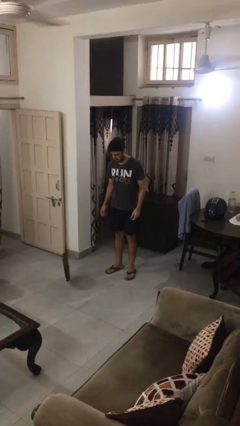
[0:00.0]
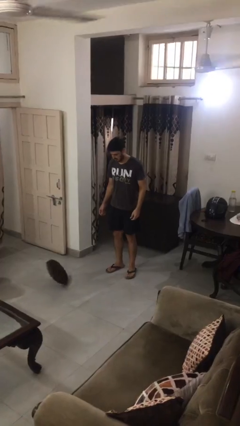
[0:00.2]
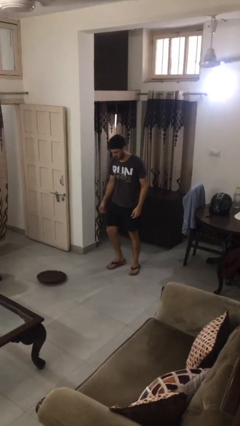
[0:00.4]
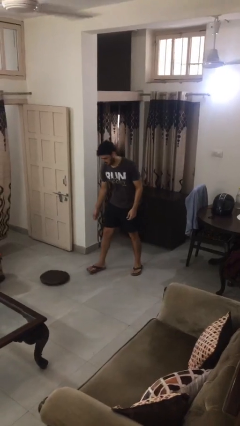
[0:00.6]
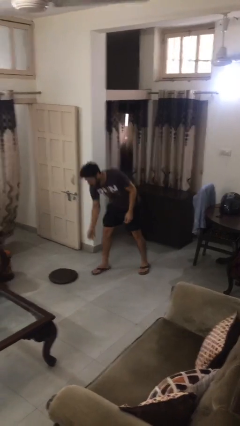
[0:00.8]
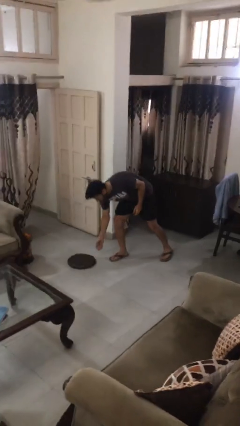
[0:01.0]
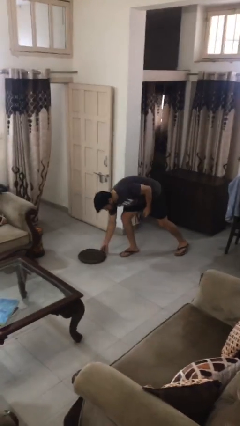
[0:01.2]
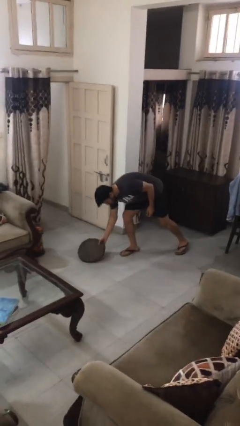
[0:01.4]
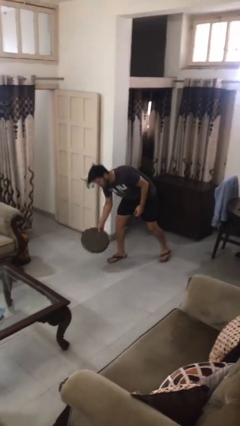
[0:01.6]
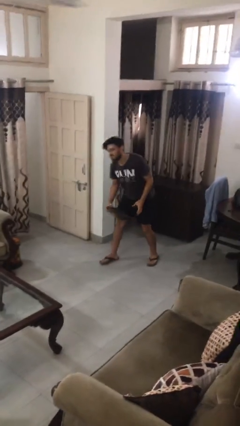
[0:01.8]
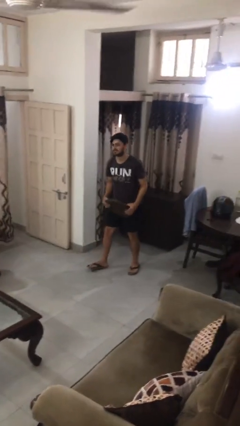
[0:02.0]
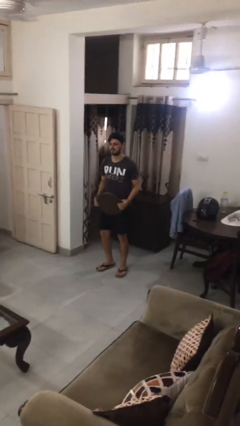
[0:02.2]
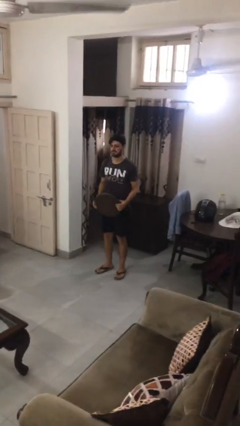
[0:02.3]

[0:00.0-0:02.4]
person picks up object from floor

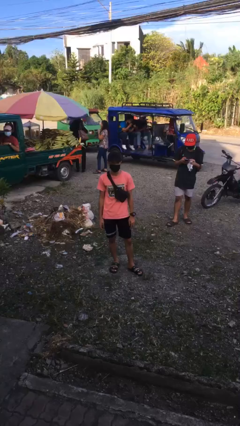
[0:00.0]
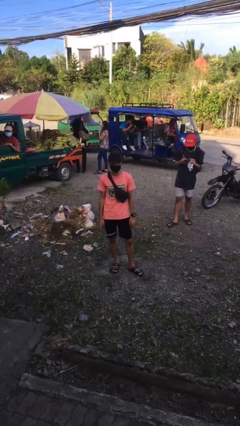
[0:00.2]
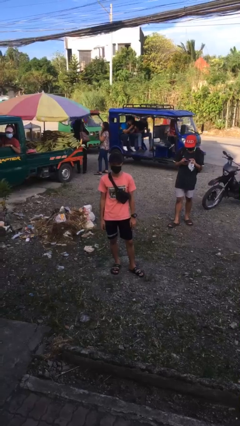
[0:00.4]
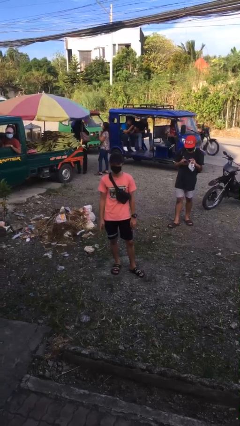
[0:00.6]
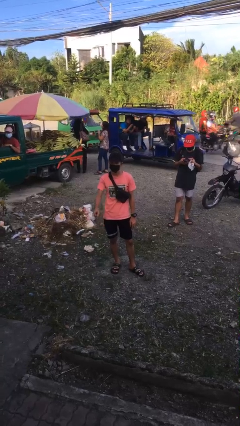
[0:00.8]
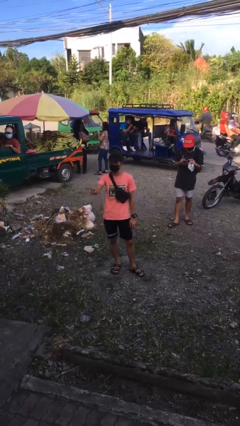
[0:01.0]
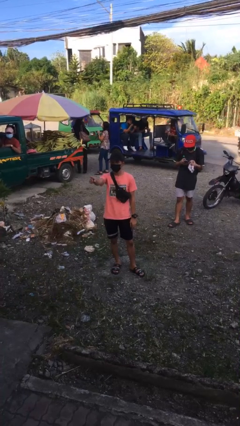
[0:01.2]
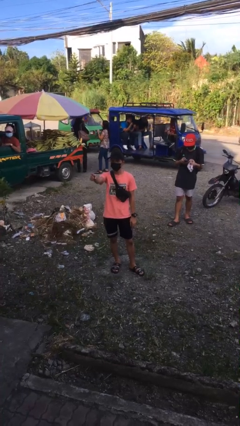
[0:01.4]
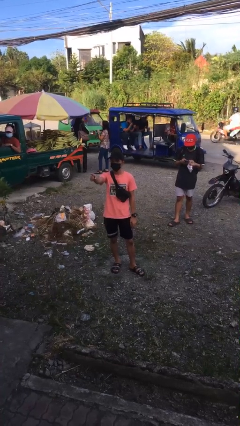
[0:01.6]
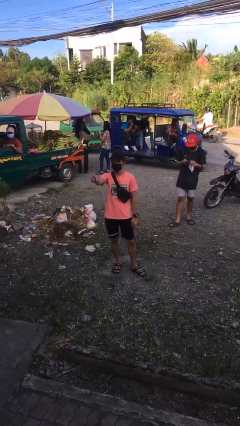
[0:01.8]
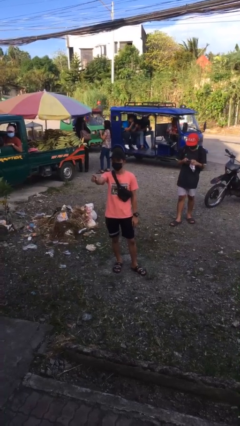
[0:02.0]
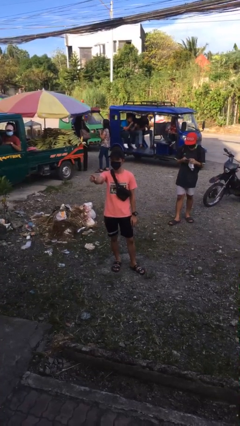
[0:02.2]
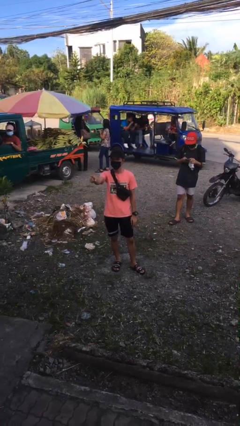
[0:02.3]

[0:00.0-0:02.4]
person points at person

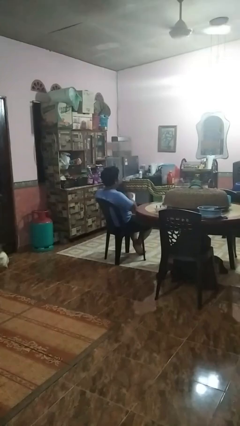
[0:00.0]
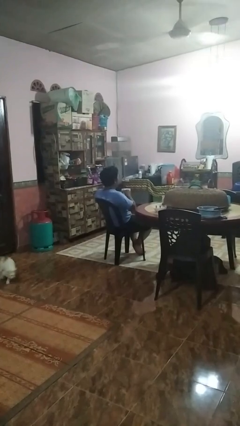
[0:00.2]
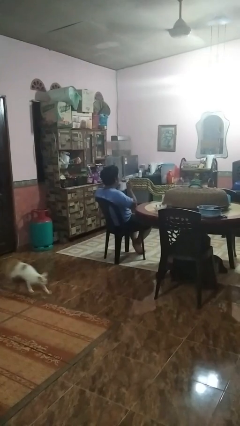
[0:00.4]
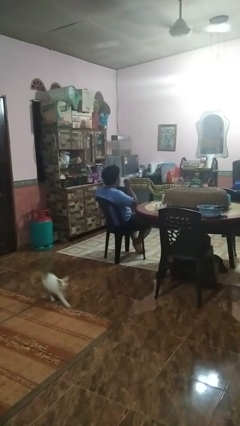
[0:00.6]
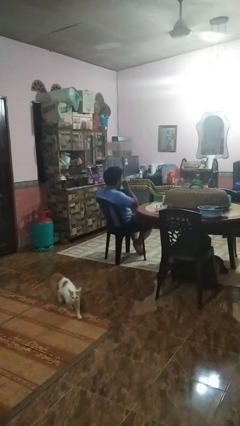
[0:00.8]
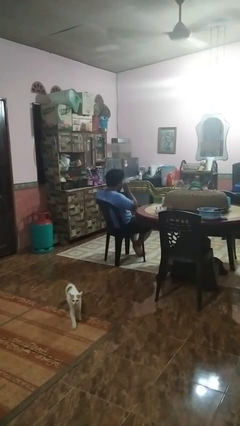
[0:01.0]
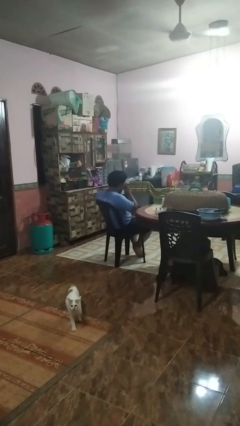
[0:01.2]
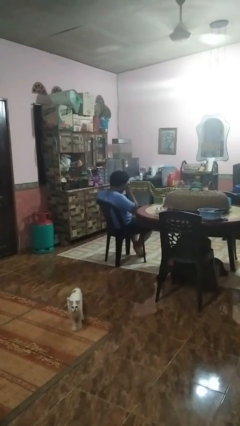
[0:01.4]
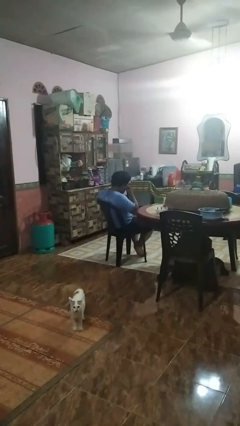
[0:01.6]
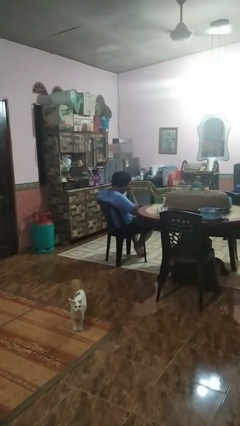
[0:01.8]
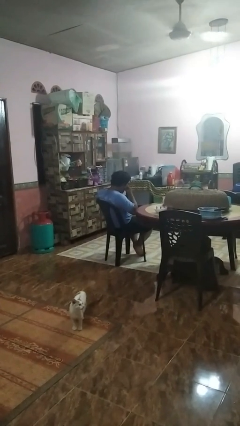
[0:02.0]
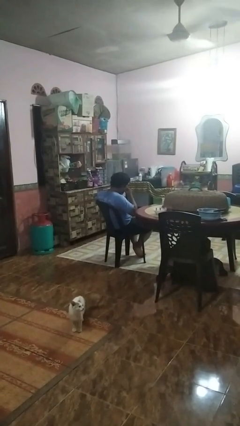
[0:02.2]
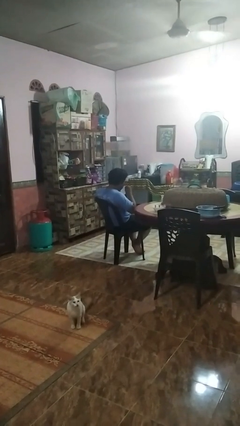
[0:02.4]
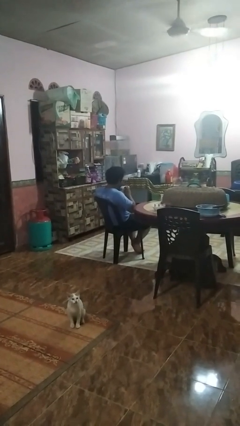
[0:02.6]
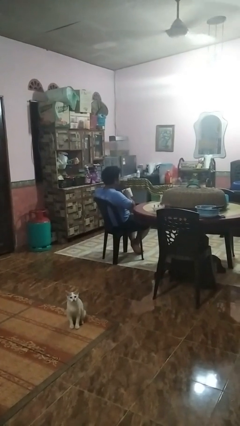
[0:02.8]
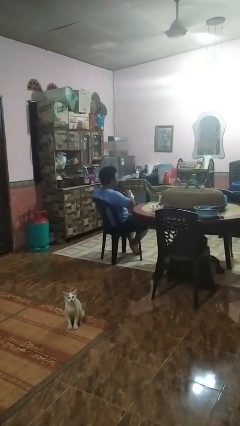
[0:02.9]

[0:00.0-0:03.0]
person blows nose

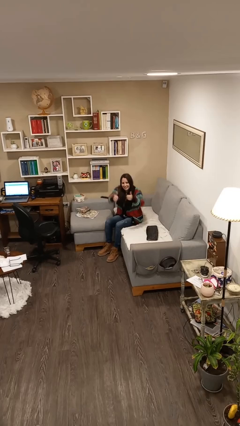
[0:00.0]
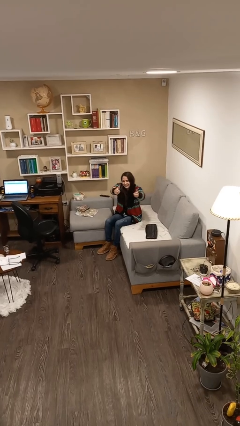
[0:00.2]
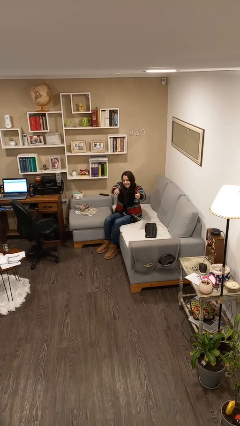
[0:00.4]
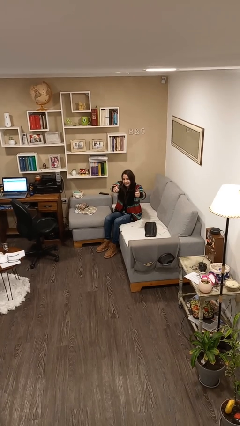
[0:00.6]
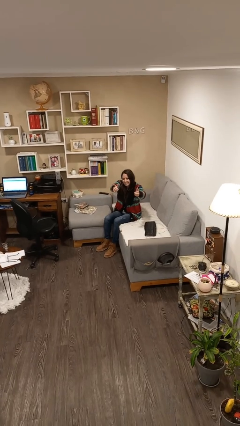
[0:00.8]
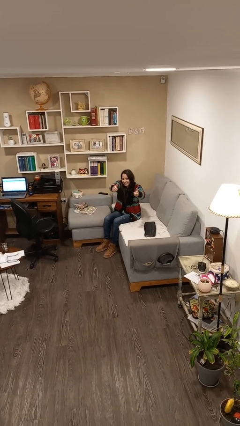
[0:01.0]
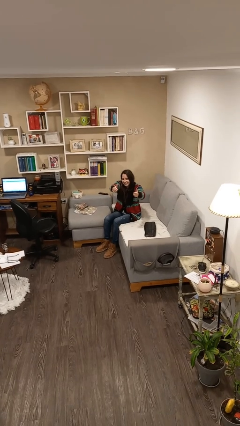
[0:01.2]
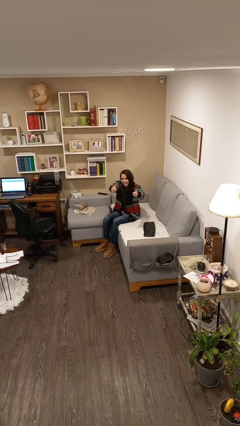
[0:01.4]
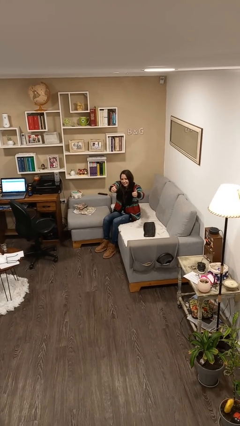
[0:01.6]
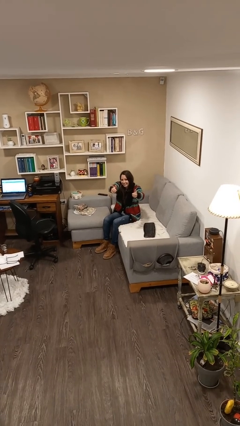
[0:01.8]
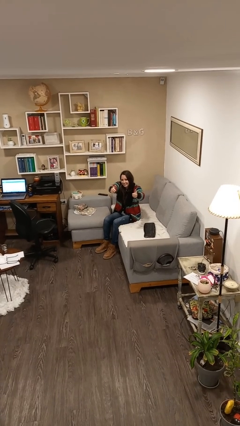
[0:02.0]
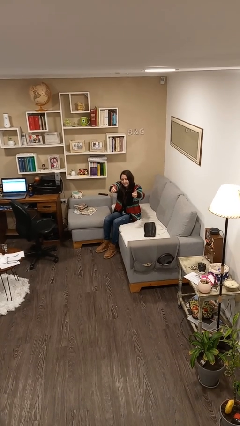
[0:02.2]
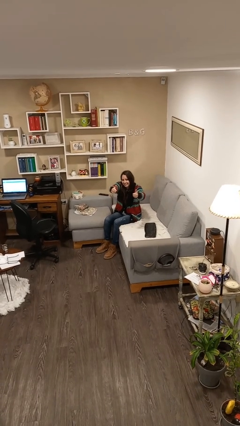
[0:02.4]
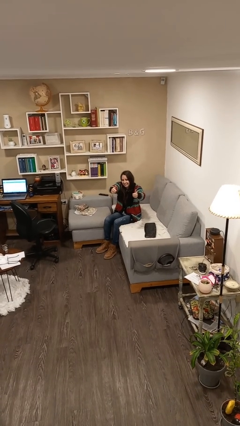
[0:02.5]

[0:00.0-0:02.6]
person gestures thumbs up

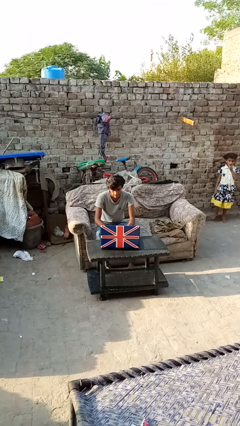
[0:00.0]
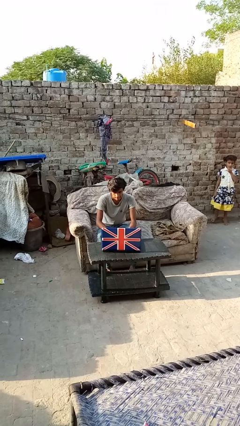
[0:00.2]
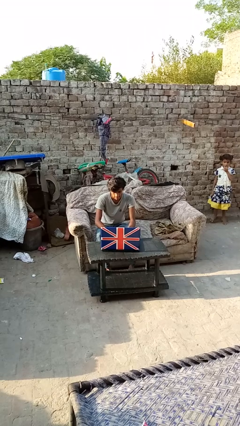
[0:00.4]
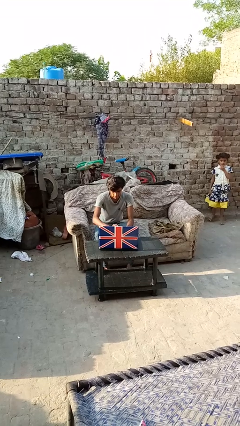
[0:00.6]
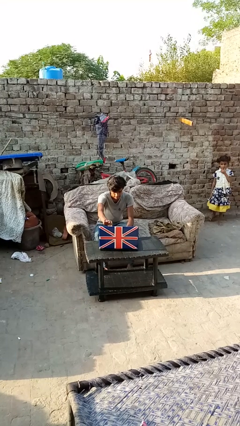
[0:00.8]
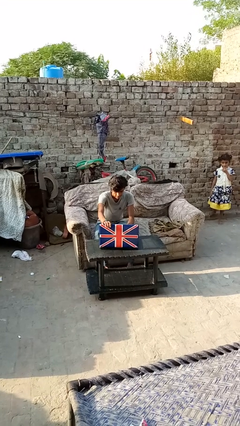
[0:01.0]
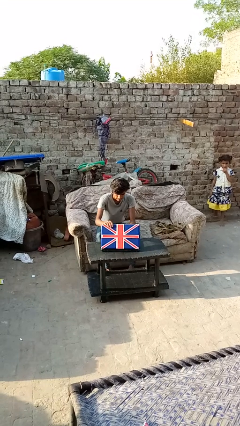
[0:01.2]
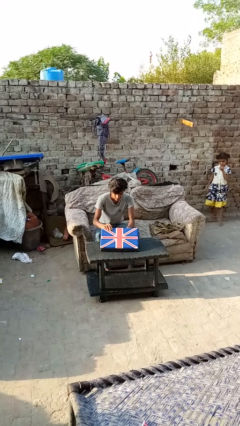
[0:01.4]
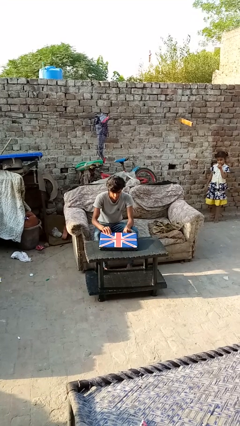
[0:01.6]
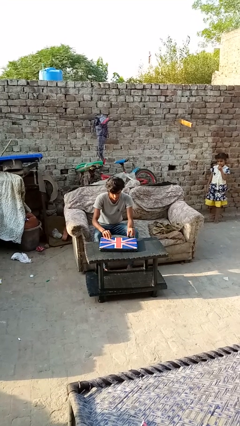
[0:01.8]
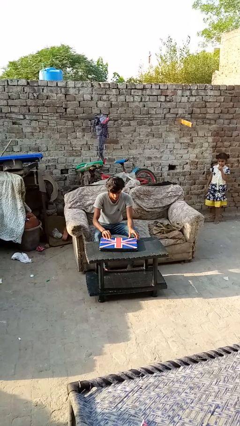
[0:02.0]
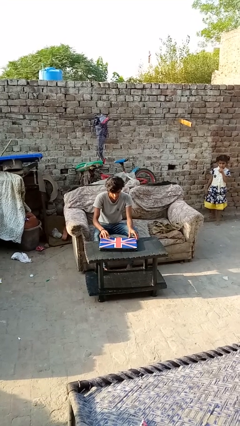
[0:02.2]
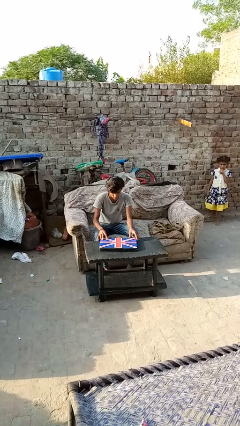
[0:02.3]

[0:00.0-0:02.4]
person closes laptop

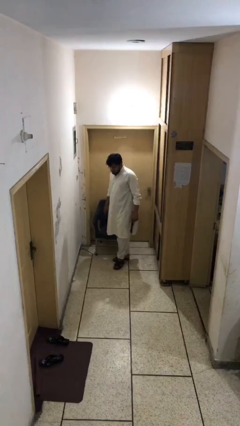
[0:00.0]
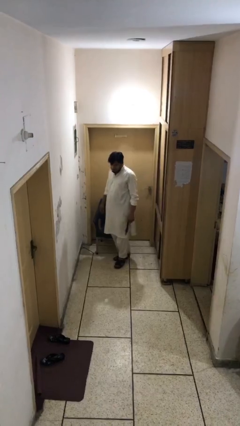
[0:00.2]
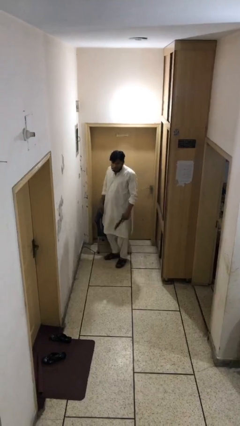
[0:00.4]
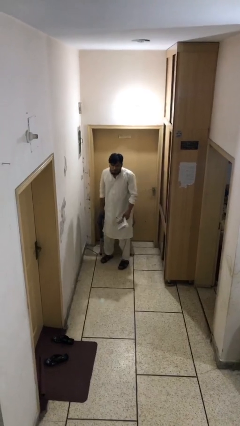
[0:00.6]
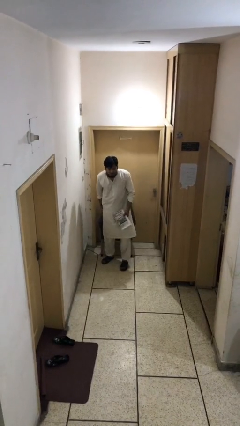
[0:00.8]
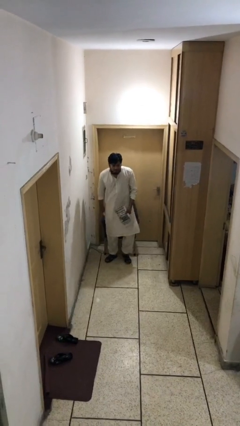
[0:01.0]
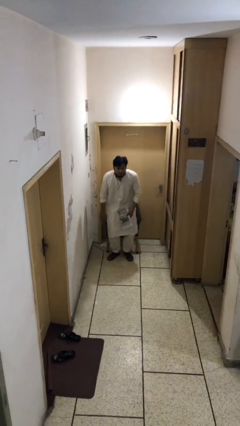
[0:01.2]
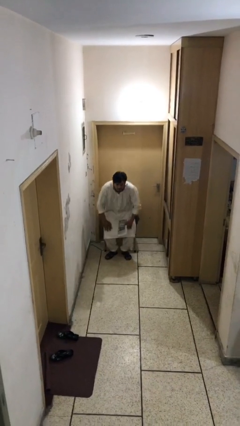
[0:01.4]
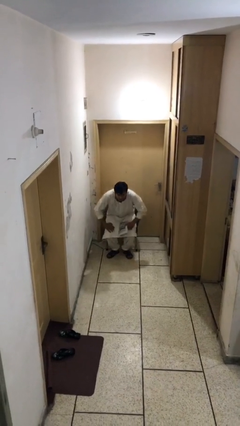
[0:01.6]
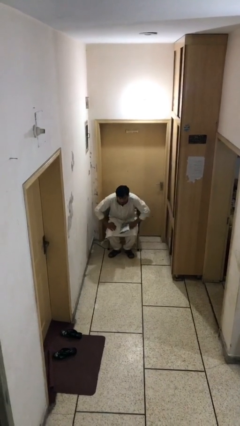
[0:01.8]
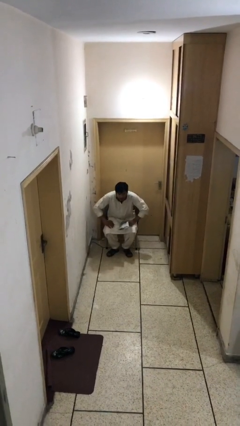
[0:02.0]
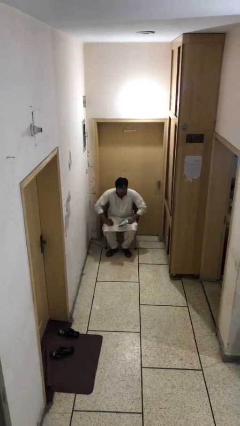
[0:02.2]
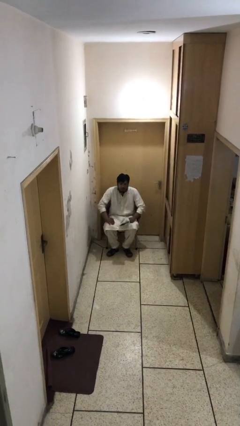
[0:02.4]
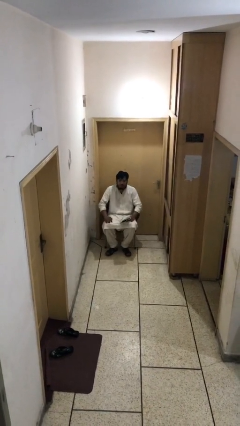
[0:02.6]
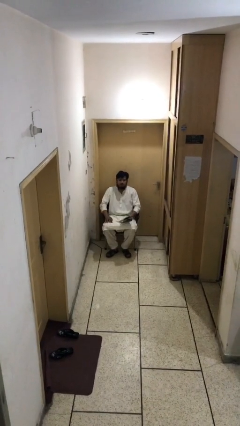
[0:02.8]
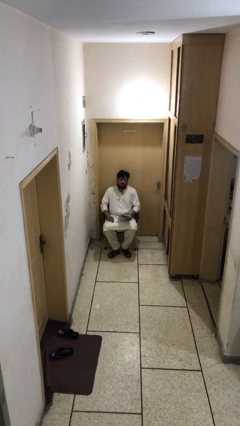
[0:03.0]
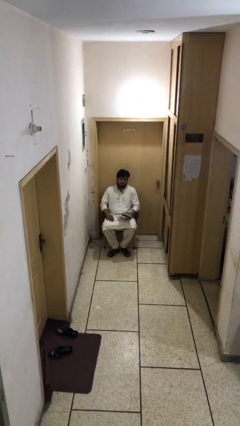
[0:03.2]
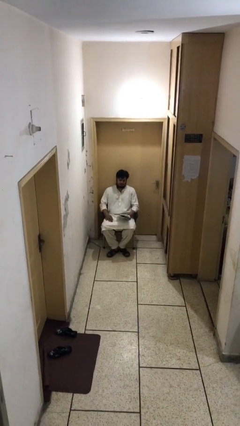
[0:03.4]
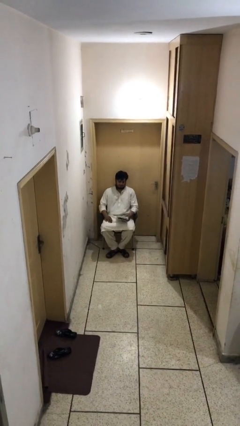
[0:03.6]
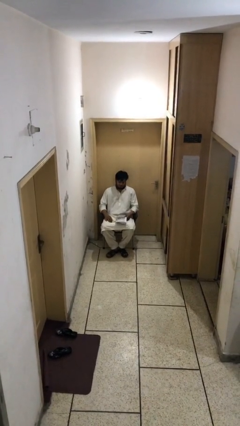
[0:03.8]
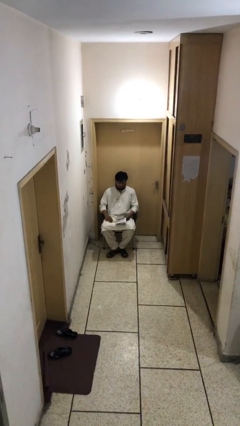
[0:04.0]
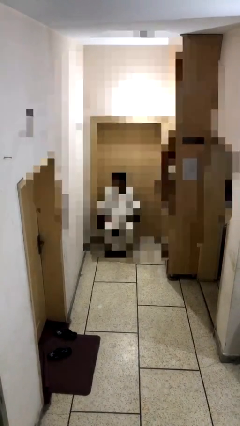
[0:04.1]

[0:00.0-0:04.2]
person sits down

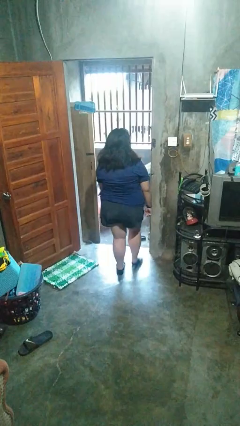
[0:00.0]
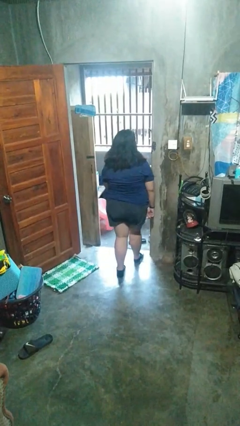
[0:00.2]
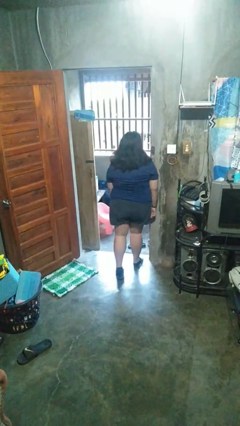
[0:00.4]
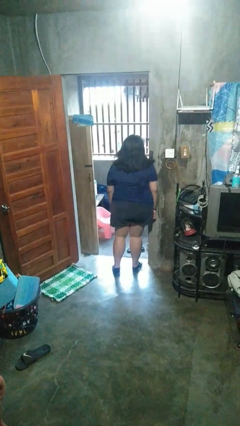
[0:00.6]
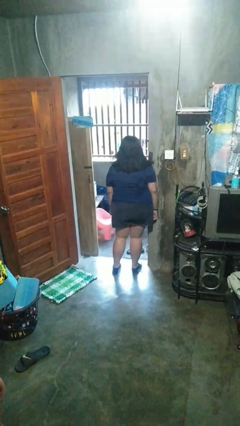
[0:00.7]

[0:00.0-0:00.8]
person bumps into wall
